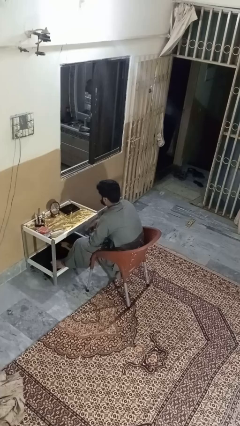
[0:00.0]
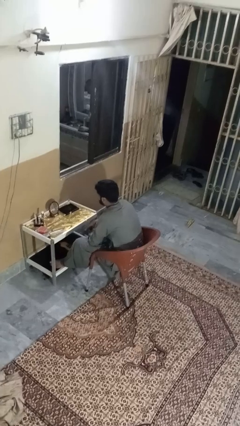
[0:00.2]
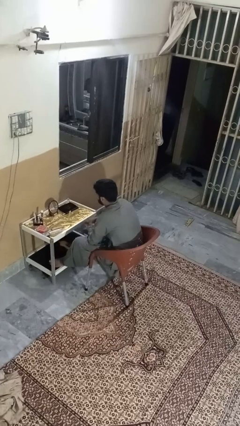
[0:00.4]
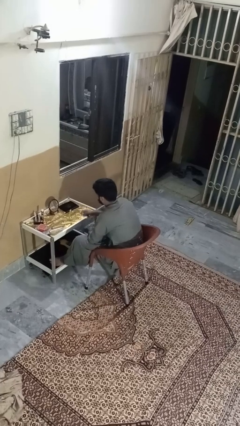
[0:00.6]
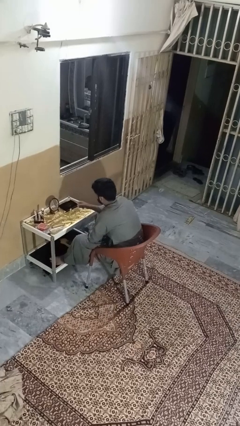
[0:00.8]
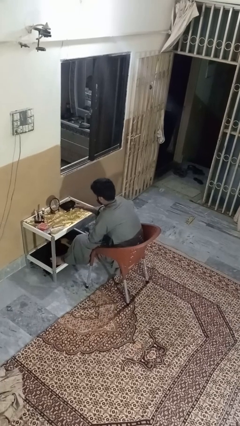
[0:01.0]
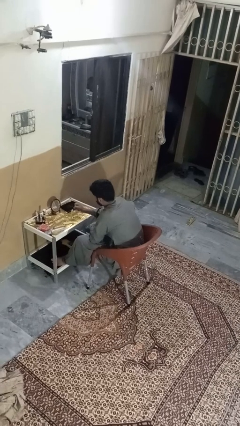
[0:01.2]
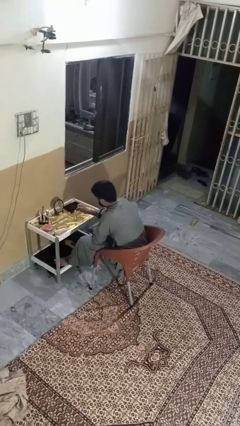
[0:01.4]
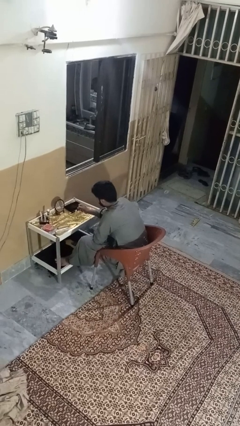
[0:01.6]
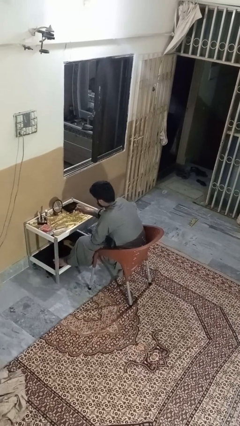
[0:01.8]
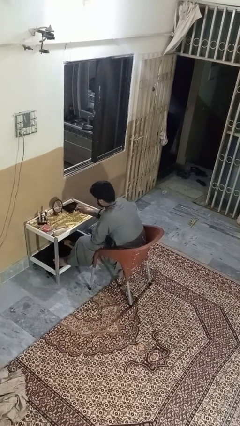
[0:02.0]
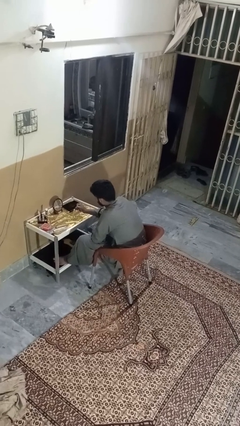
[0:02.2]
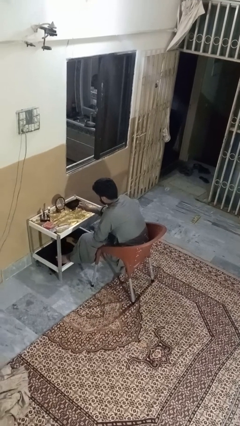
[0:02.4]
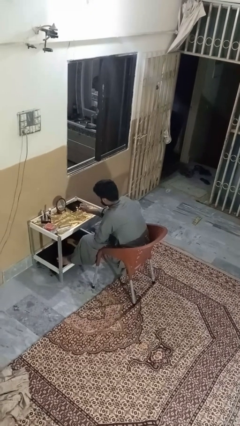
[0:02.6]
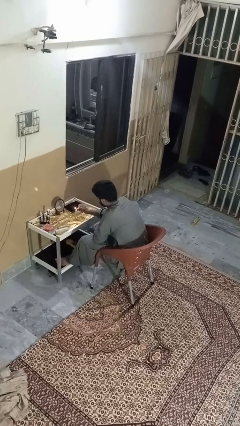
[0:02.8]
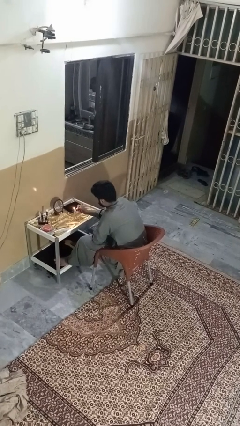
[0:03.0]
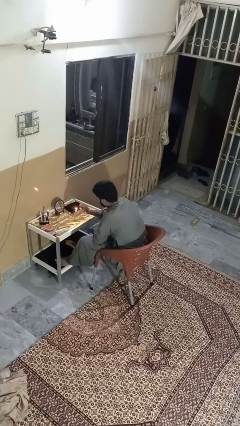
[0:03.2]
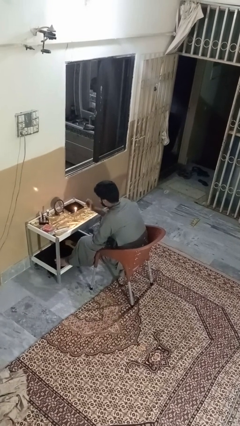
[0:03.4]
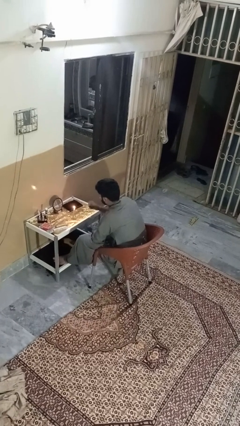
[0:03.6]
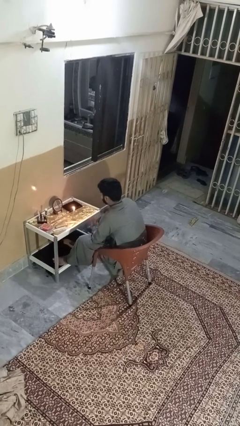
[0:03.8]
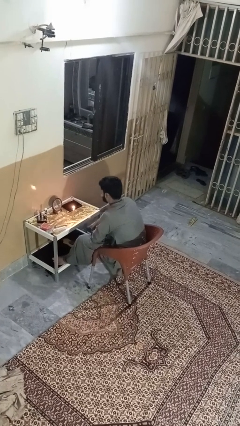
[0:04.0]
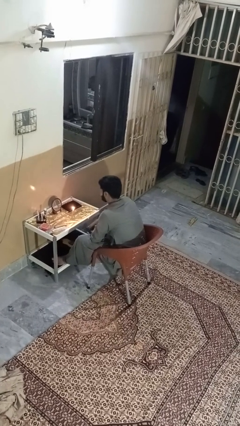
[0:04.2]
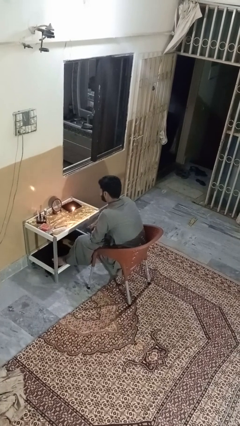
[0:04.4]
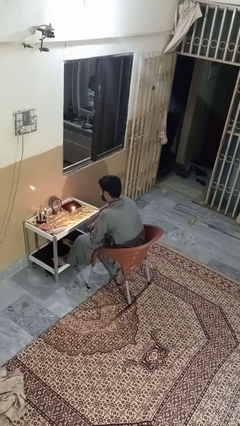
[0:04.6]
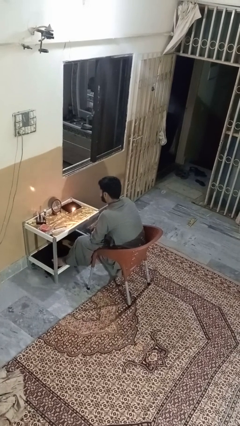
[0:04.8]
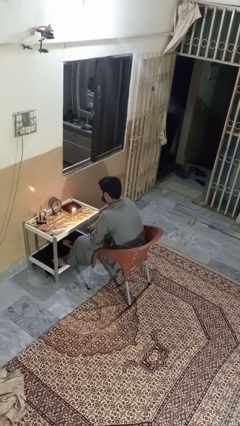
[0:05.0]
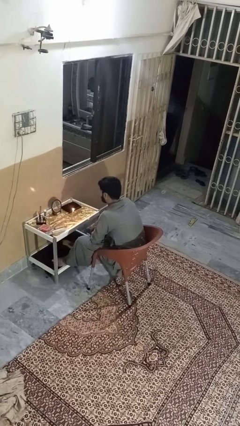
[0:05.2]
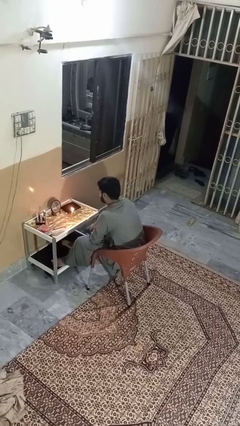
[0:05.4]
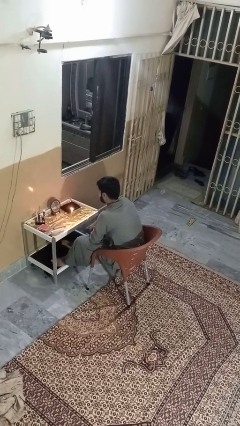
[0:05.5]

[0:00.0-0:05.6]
person lights candle

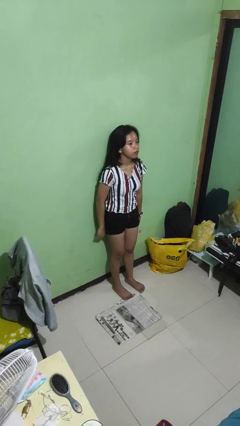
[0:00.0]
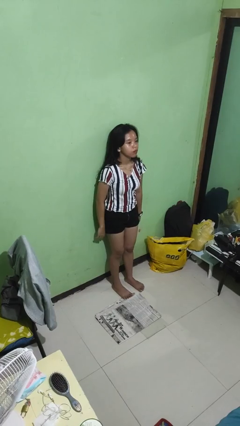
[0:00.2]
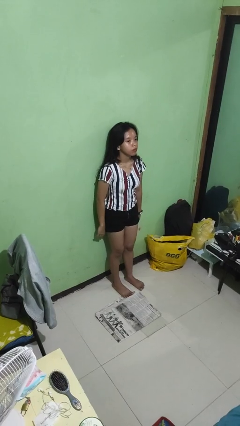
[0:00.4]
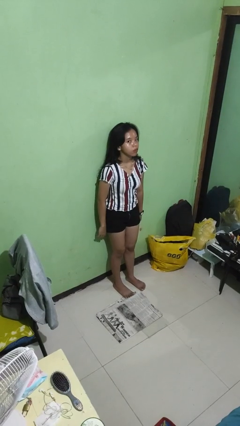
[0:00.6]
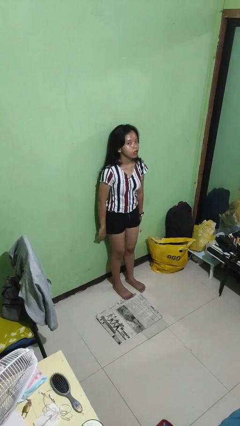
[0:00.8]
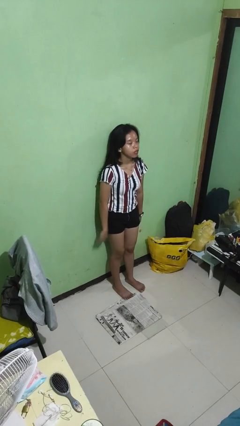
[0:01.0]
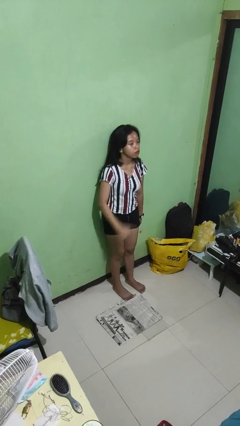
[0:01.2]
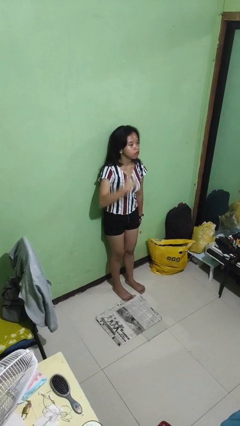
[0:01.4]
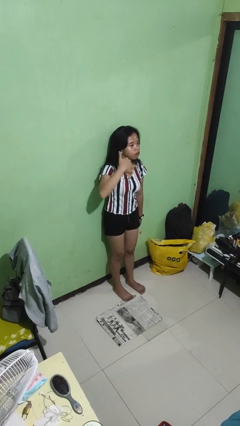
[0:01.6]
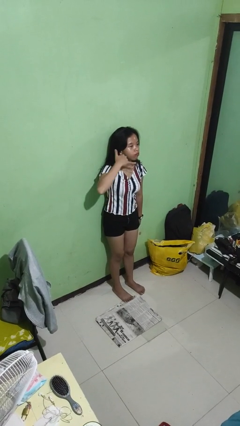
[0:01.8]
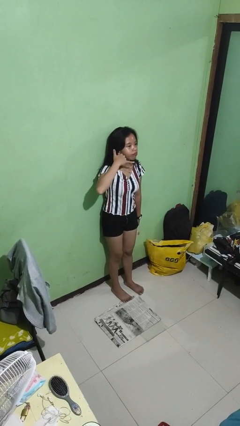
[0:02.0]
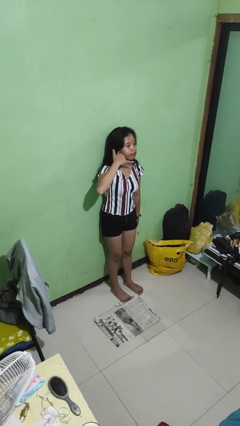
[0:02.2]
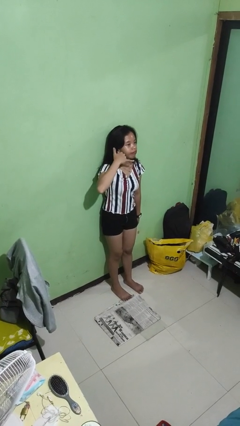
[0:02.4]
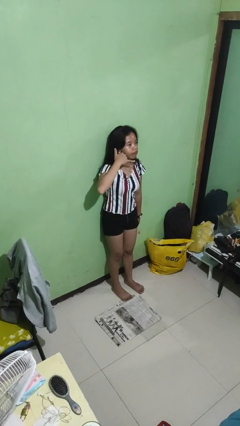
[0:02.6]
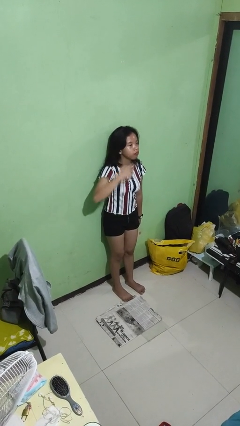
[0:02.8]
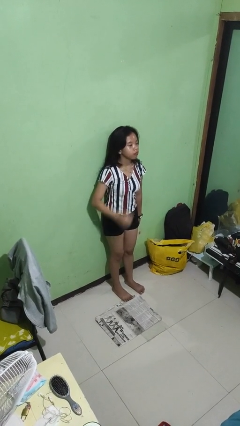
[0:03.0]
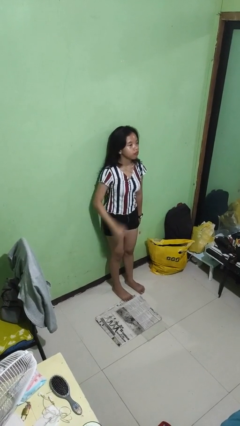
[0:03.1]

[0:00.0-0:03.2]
person throws object into air

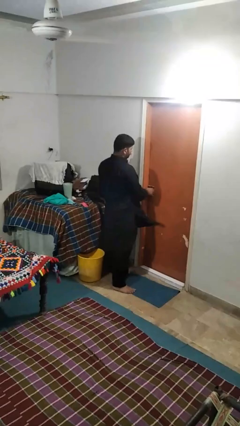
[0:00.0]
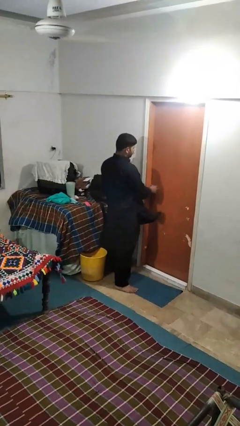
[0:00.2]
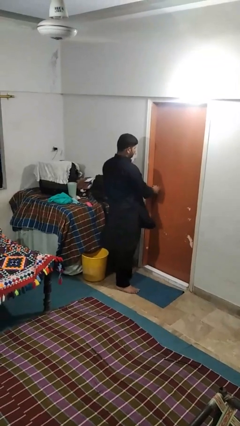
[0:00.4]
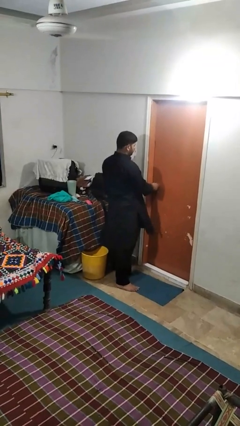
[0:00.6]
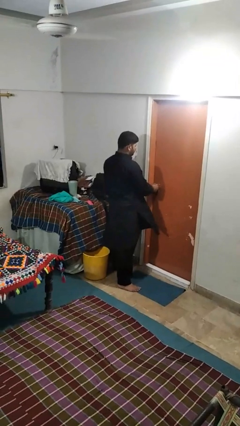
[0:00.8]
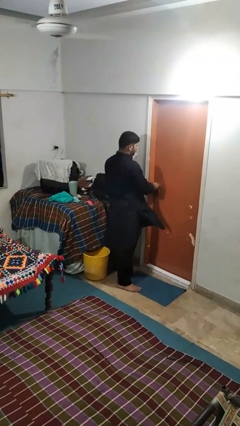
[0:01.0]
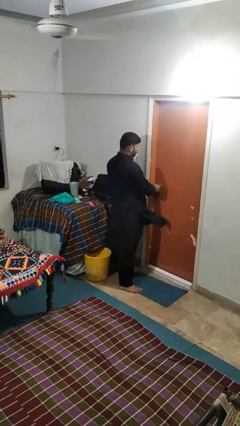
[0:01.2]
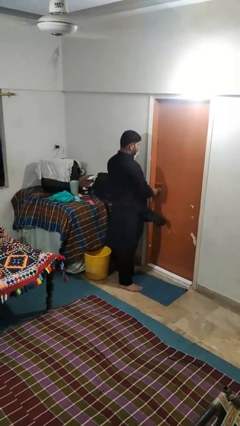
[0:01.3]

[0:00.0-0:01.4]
person locks door with keys

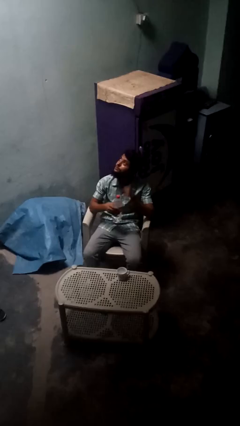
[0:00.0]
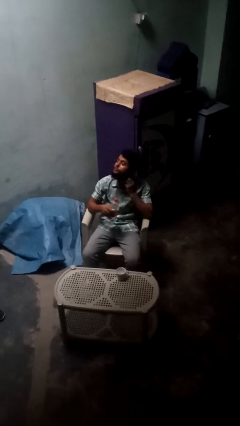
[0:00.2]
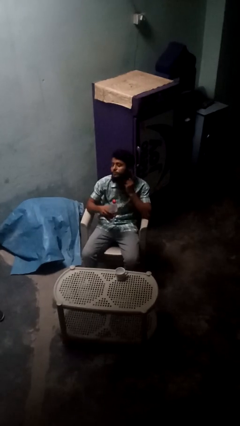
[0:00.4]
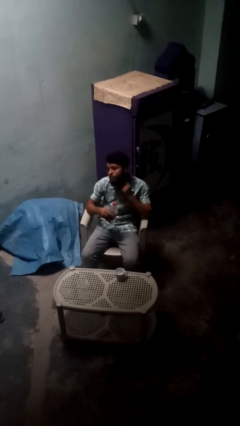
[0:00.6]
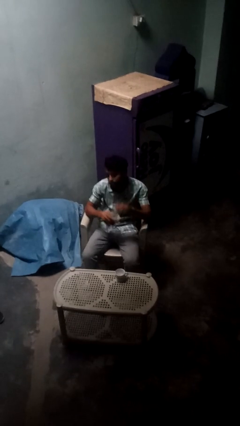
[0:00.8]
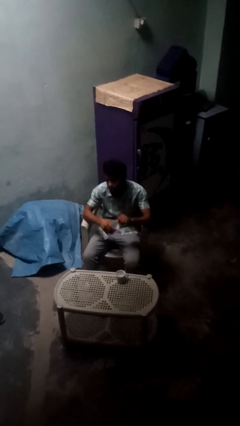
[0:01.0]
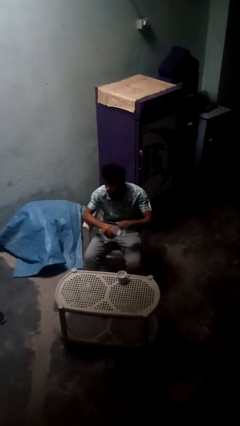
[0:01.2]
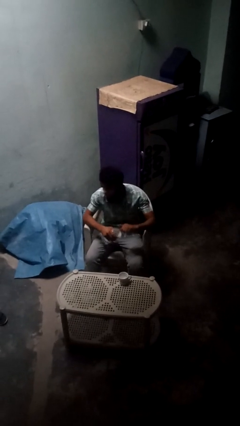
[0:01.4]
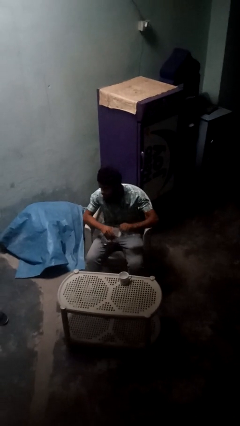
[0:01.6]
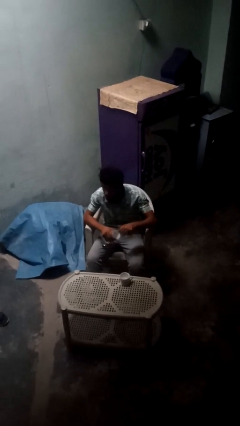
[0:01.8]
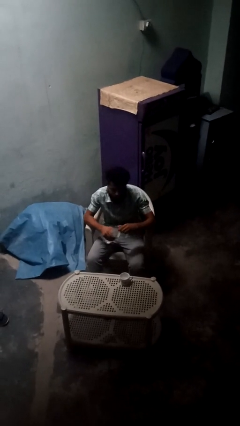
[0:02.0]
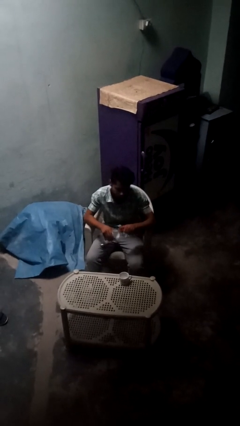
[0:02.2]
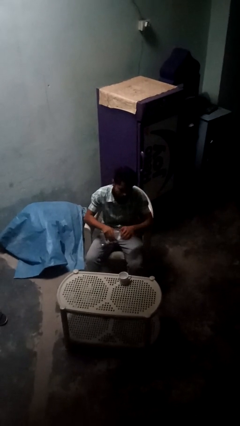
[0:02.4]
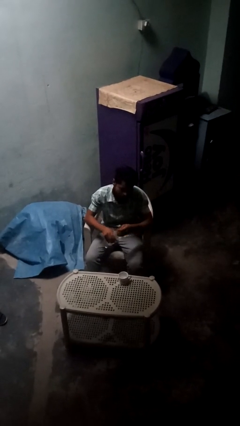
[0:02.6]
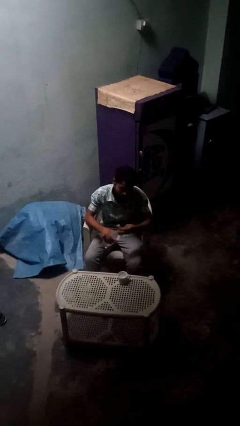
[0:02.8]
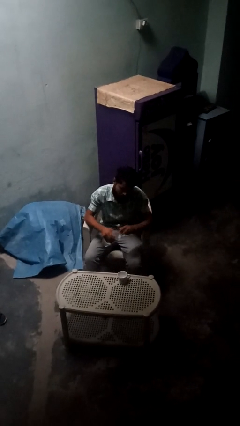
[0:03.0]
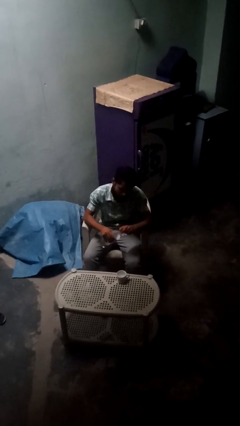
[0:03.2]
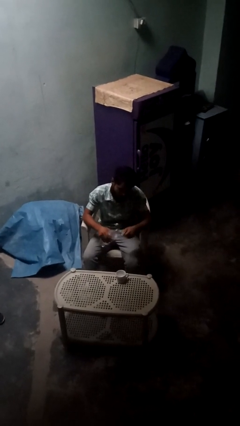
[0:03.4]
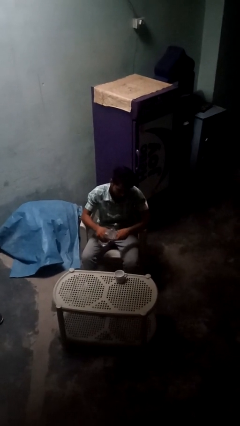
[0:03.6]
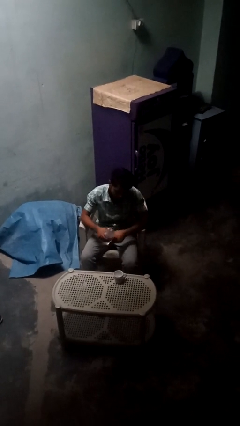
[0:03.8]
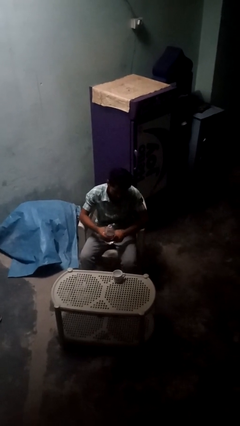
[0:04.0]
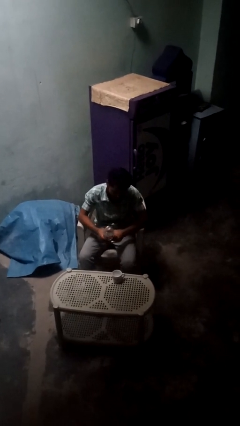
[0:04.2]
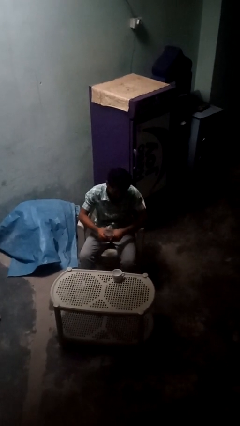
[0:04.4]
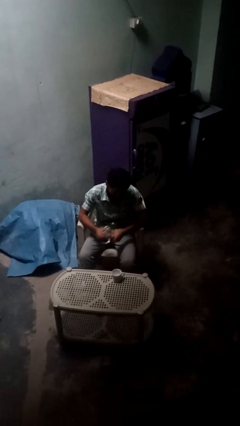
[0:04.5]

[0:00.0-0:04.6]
person unscrews lid from bottle

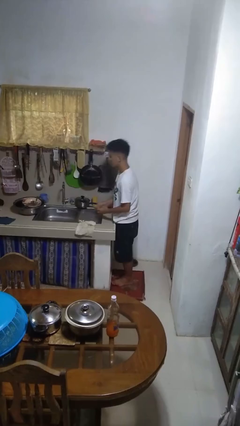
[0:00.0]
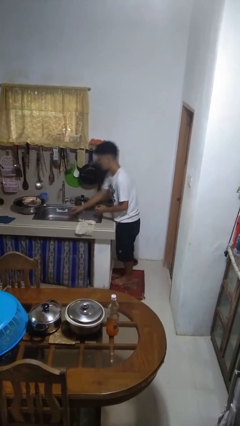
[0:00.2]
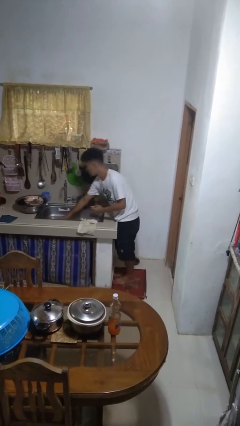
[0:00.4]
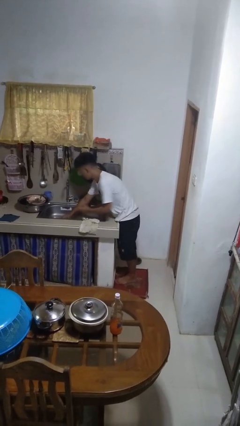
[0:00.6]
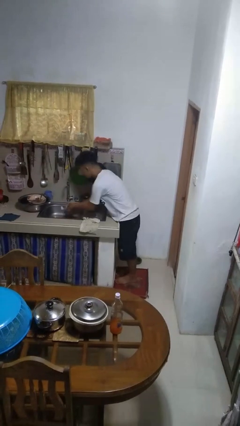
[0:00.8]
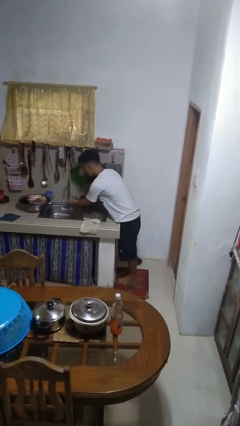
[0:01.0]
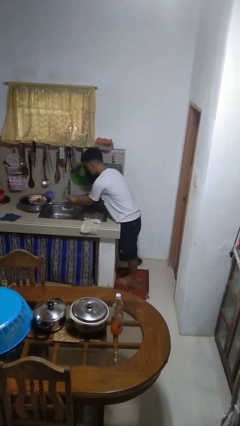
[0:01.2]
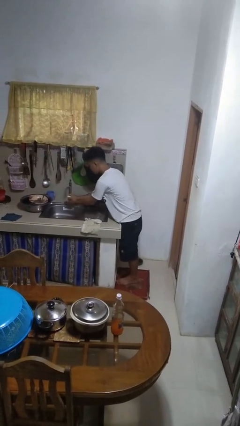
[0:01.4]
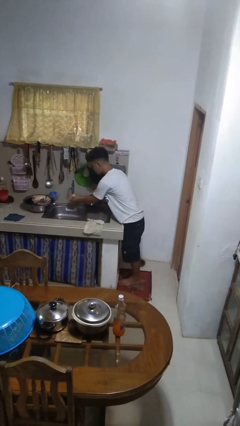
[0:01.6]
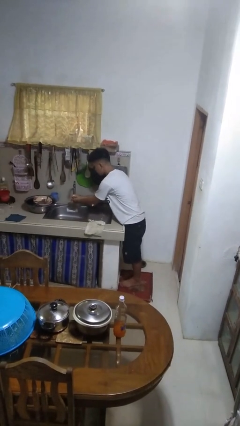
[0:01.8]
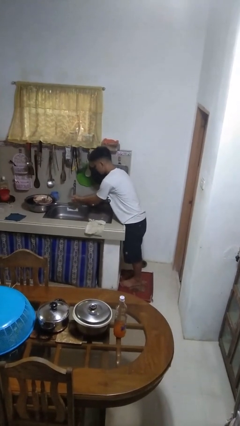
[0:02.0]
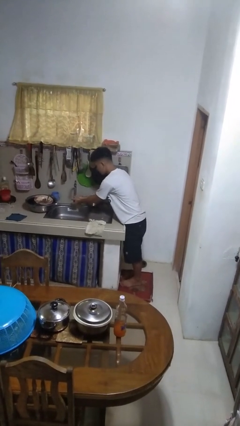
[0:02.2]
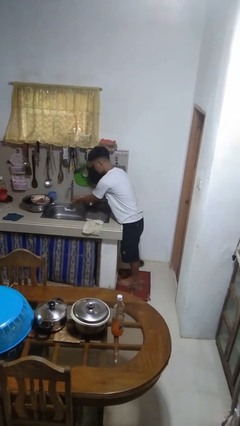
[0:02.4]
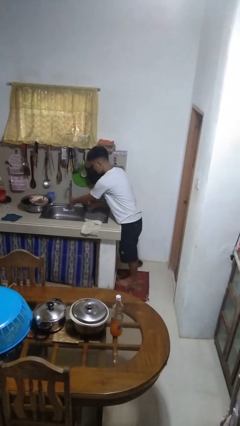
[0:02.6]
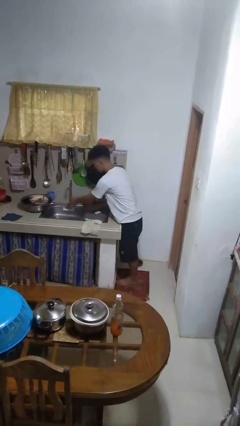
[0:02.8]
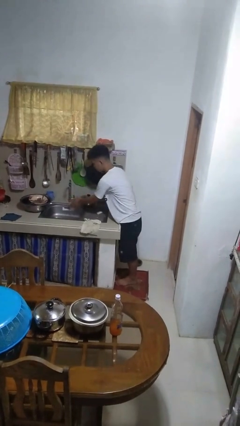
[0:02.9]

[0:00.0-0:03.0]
person washes hands
